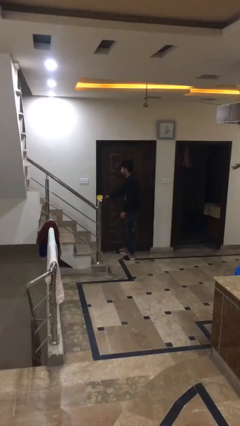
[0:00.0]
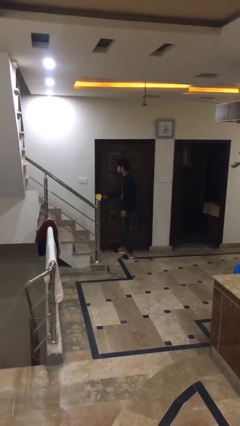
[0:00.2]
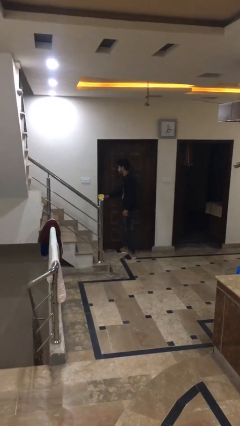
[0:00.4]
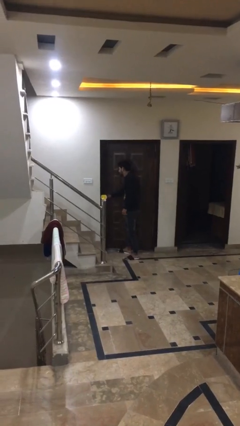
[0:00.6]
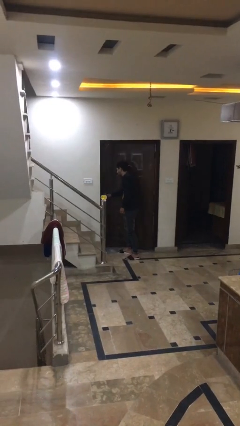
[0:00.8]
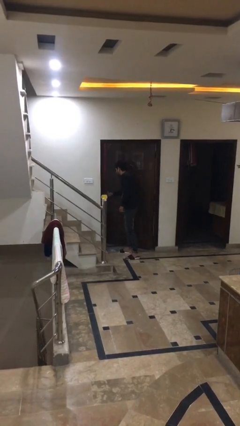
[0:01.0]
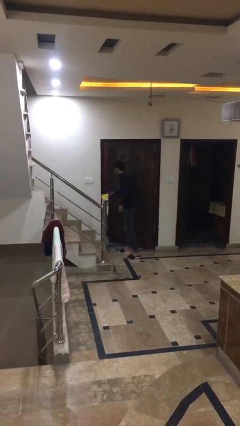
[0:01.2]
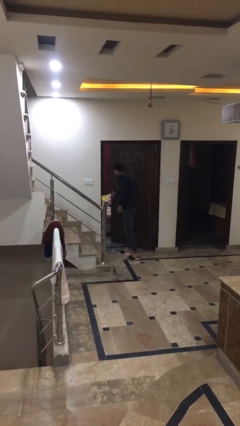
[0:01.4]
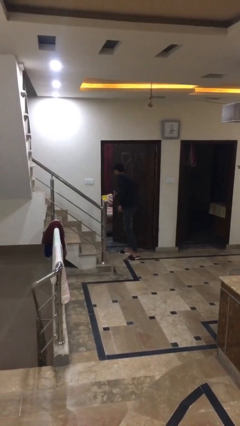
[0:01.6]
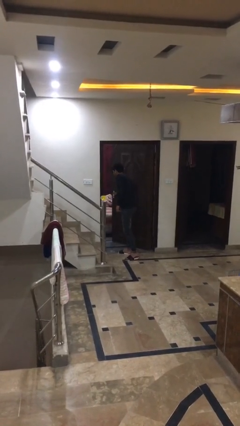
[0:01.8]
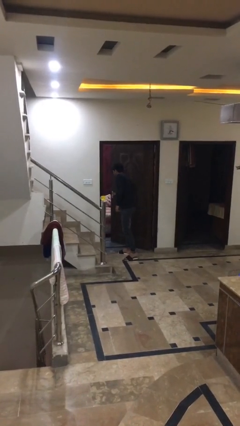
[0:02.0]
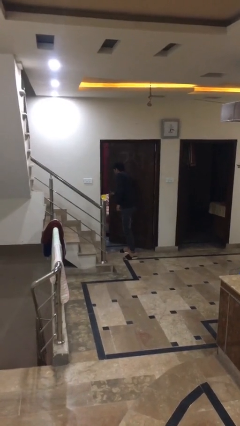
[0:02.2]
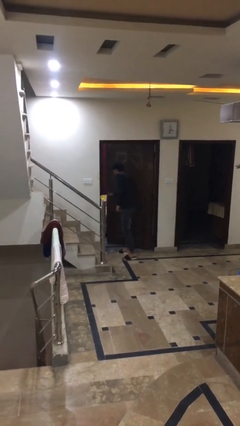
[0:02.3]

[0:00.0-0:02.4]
person opens facility door

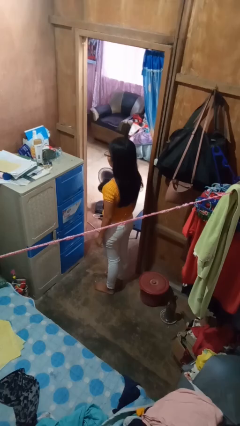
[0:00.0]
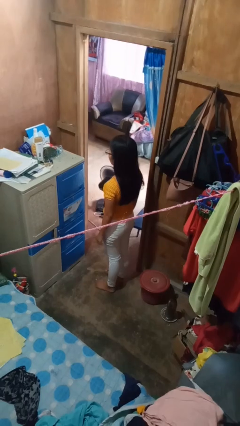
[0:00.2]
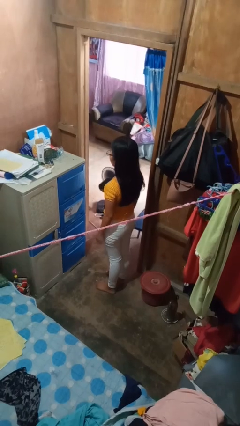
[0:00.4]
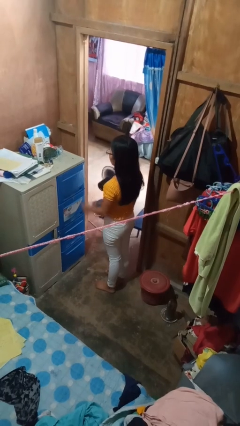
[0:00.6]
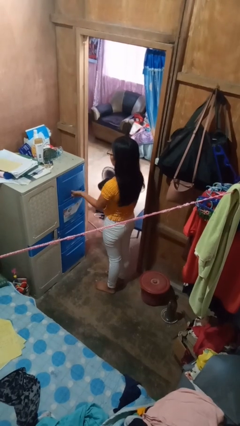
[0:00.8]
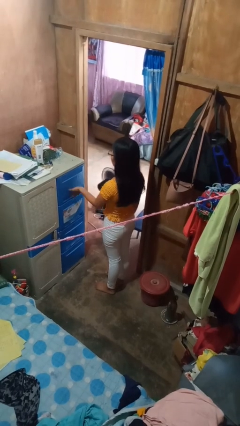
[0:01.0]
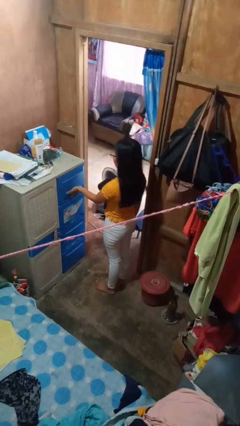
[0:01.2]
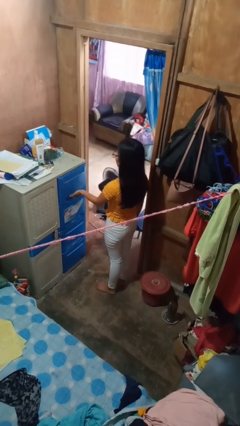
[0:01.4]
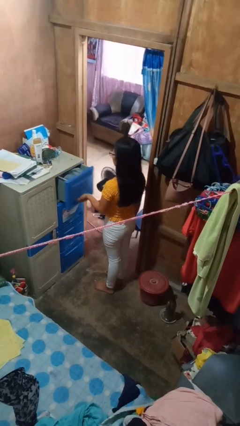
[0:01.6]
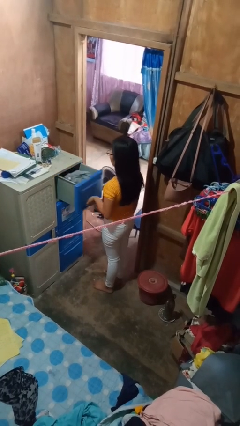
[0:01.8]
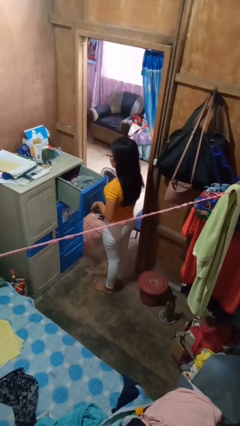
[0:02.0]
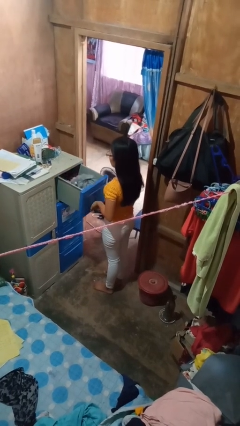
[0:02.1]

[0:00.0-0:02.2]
person opens dresser drawer

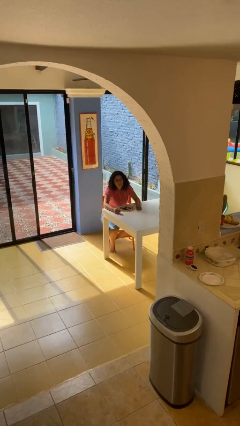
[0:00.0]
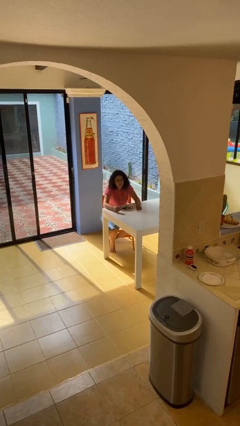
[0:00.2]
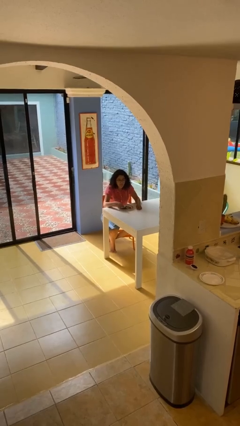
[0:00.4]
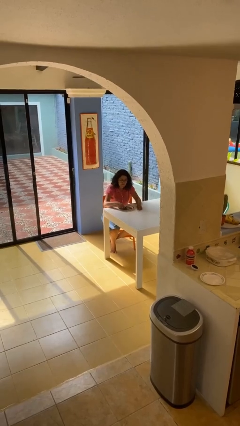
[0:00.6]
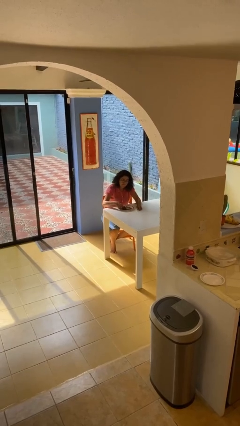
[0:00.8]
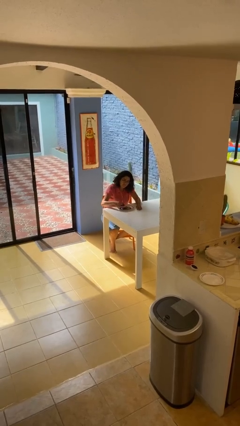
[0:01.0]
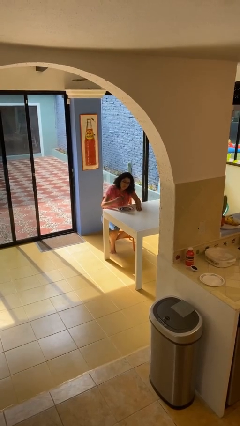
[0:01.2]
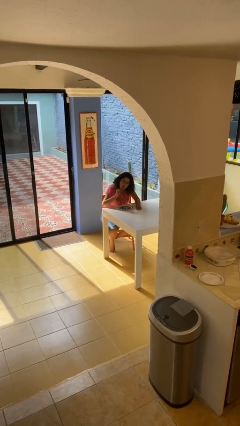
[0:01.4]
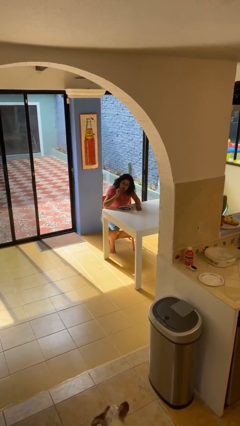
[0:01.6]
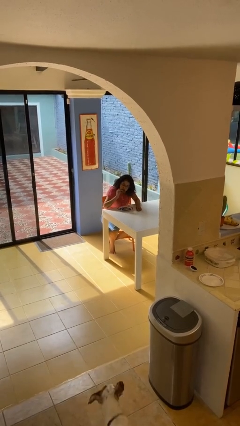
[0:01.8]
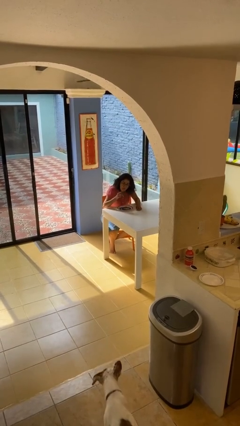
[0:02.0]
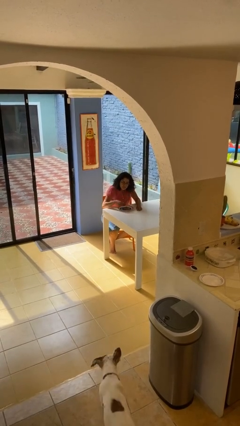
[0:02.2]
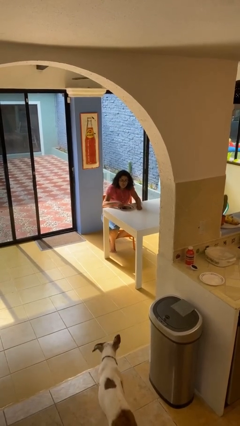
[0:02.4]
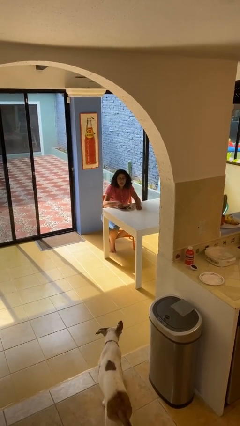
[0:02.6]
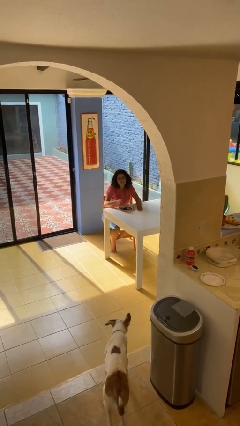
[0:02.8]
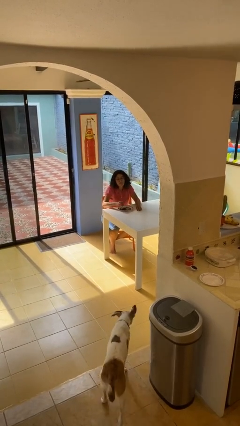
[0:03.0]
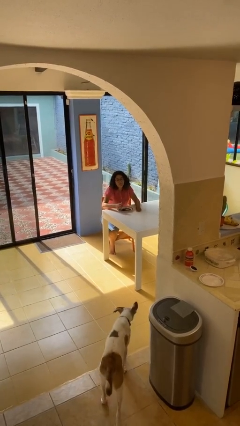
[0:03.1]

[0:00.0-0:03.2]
person eats with hands

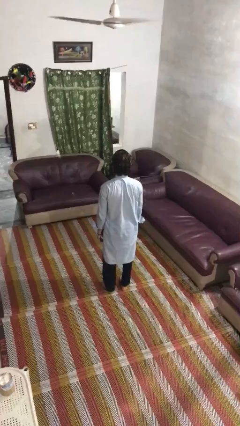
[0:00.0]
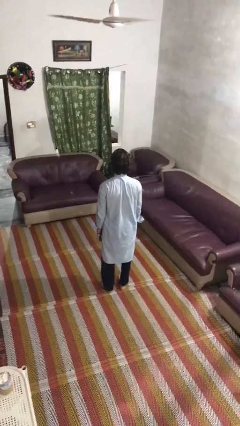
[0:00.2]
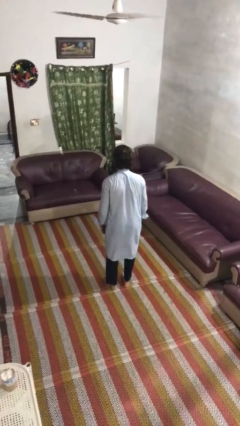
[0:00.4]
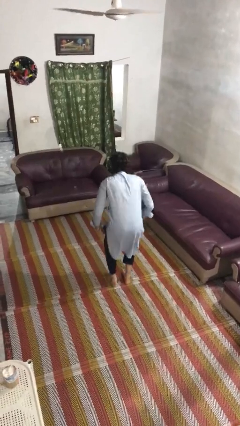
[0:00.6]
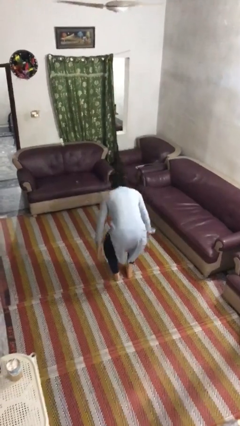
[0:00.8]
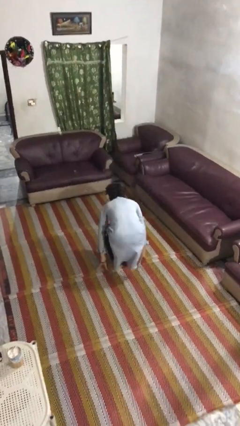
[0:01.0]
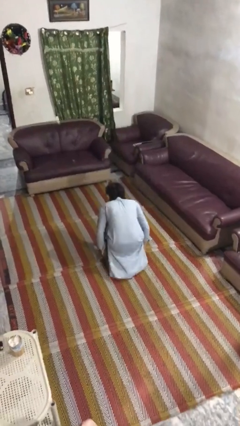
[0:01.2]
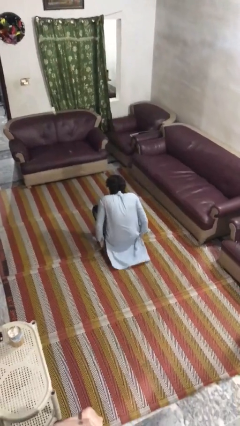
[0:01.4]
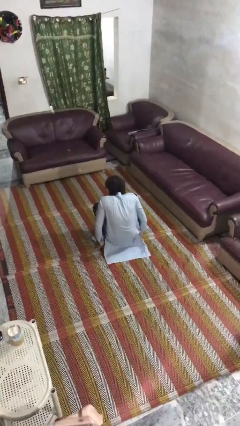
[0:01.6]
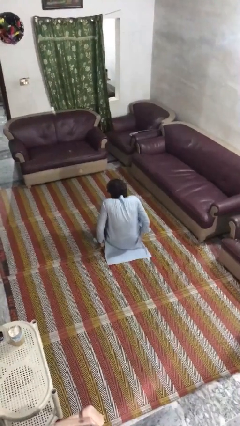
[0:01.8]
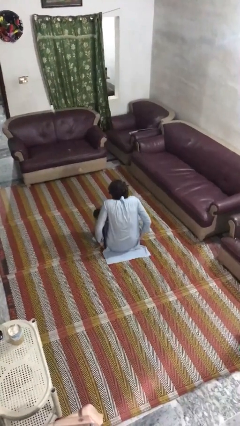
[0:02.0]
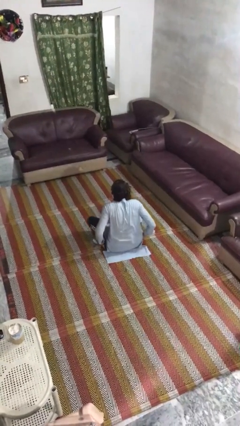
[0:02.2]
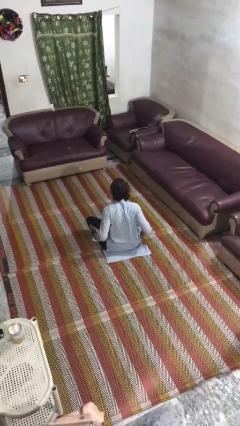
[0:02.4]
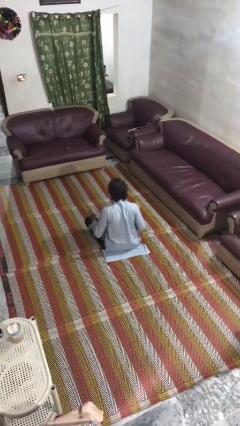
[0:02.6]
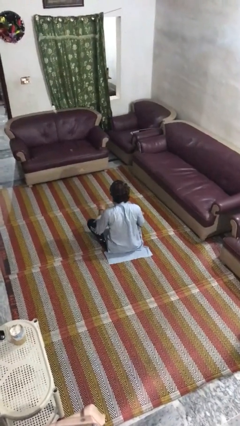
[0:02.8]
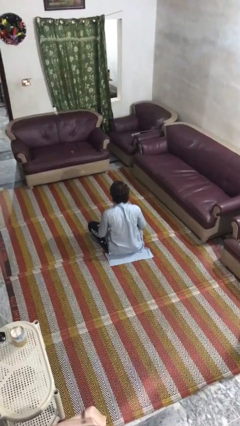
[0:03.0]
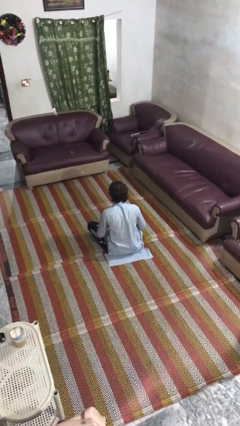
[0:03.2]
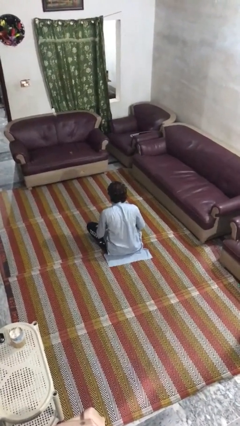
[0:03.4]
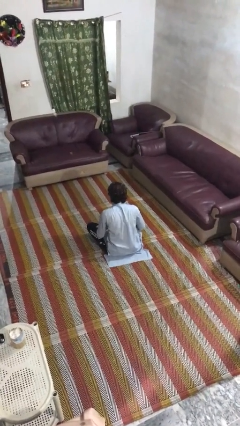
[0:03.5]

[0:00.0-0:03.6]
person sits crisscross

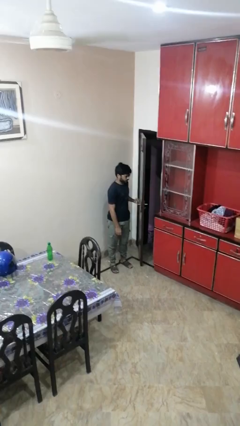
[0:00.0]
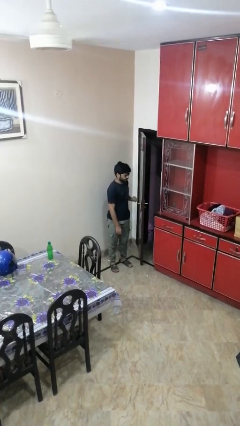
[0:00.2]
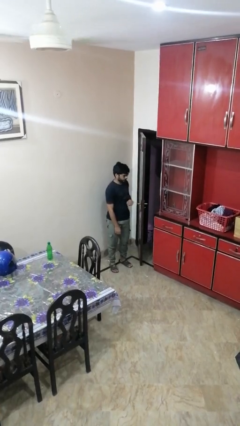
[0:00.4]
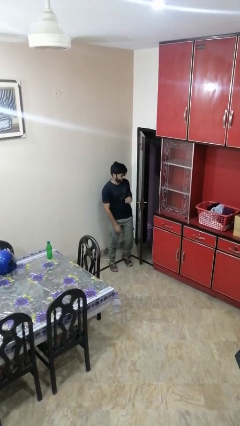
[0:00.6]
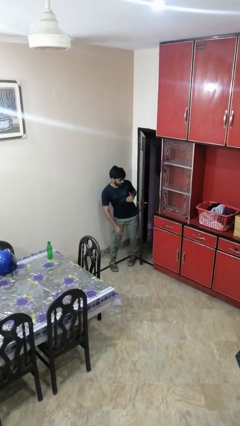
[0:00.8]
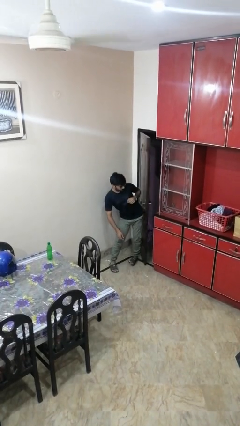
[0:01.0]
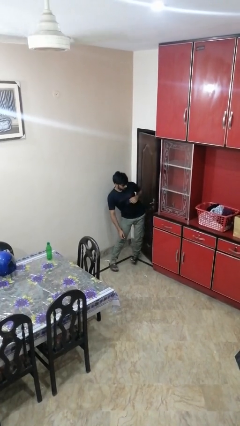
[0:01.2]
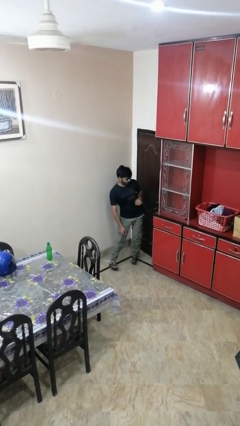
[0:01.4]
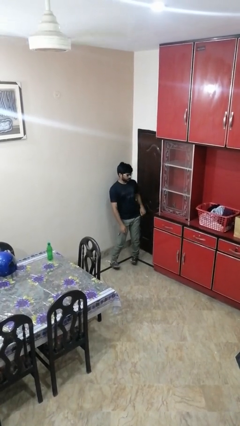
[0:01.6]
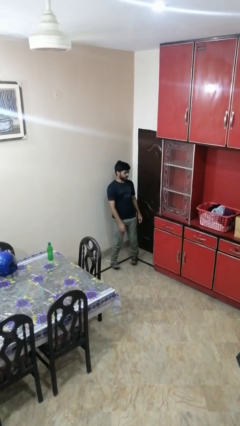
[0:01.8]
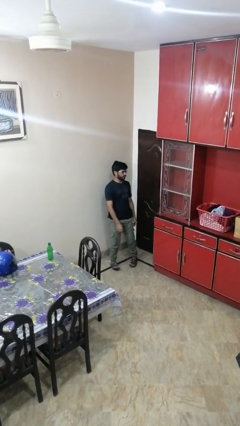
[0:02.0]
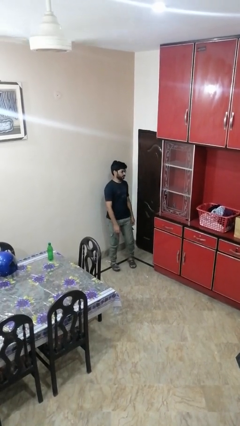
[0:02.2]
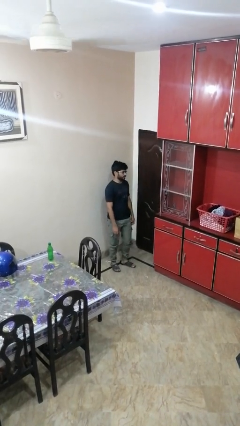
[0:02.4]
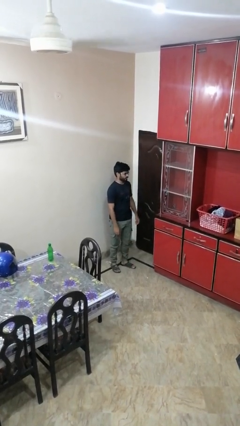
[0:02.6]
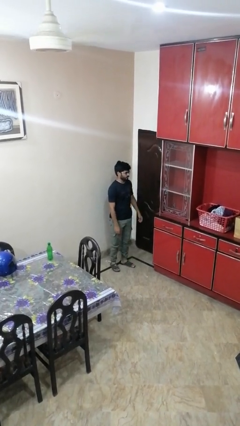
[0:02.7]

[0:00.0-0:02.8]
person closes door with hip

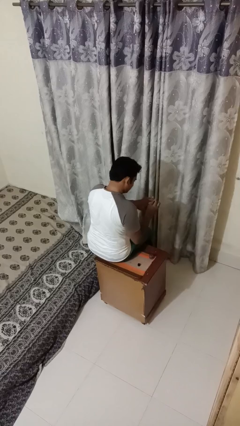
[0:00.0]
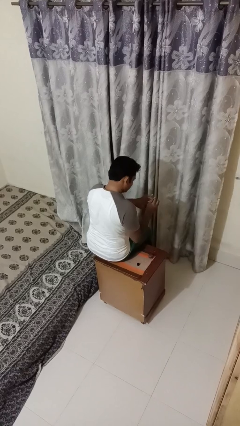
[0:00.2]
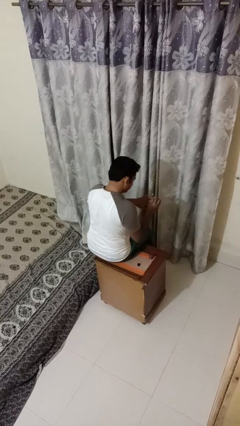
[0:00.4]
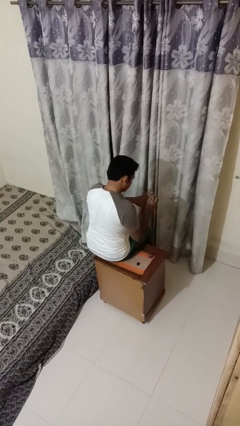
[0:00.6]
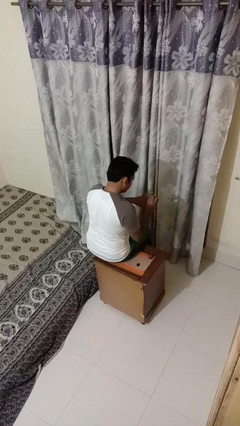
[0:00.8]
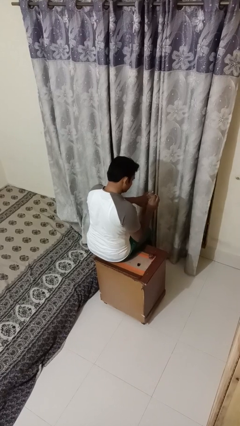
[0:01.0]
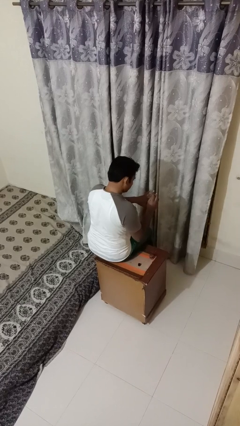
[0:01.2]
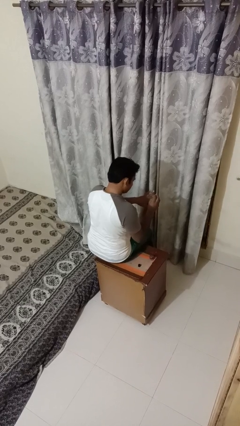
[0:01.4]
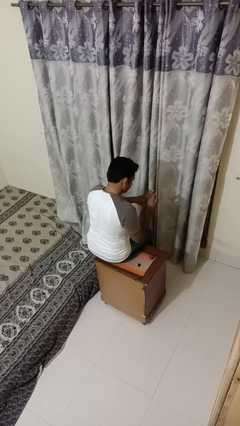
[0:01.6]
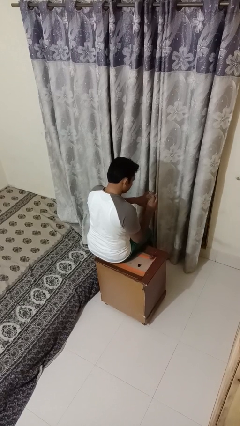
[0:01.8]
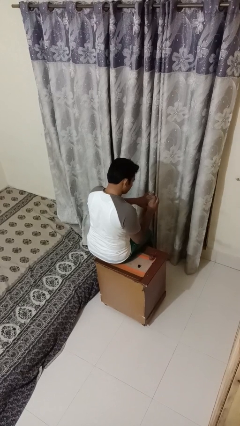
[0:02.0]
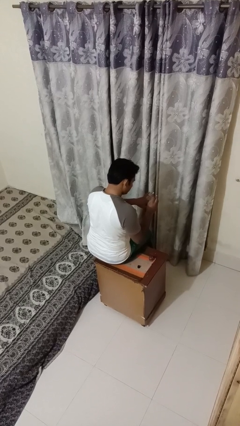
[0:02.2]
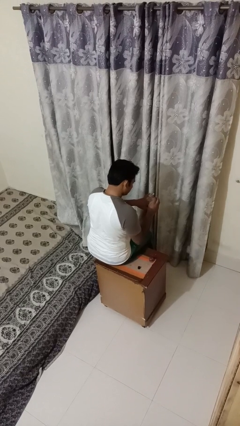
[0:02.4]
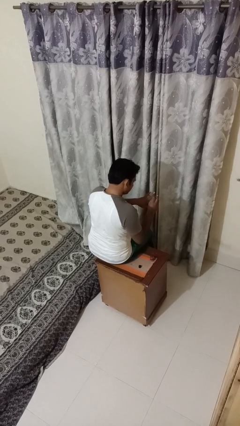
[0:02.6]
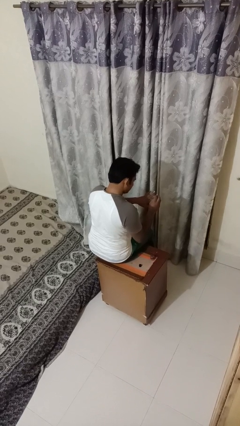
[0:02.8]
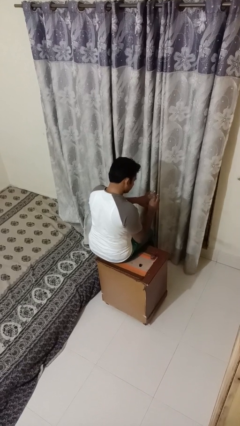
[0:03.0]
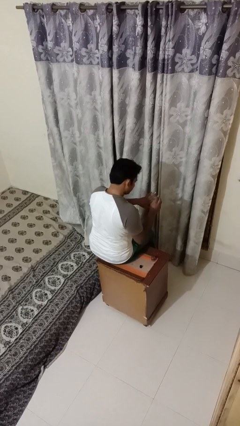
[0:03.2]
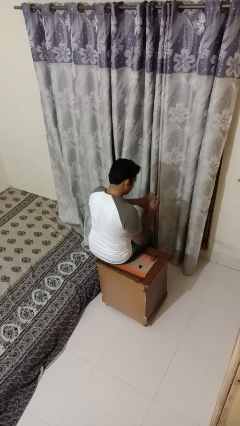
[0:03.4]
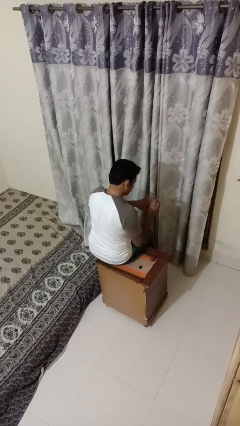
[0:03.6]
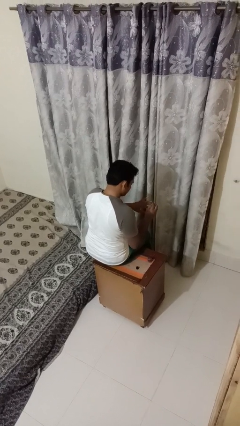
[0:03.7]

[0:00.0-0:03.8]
person paints fingernails
